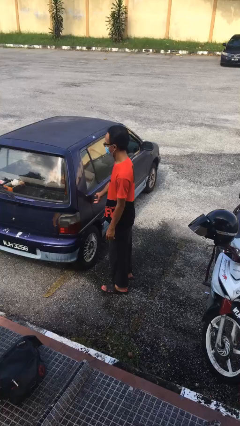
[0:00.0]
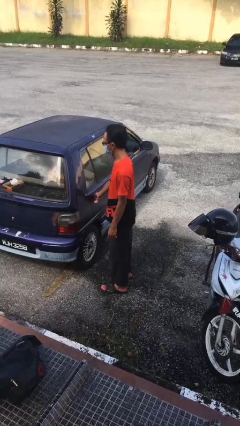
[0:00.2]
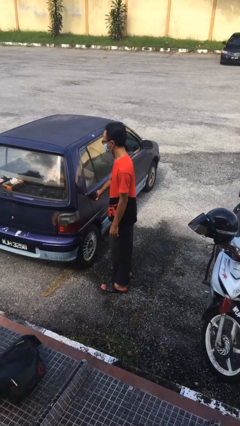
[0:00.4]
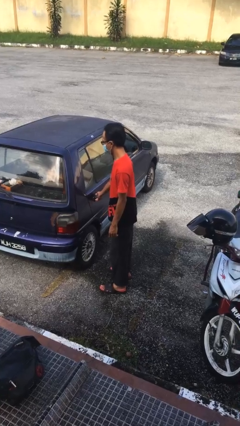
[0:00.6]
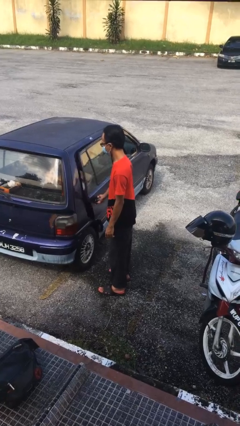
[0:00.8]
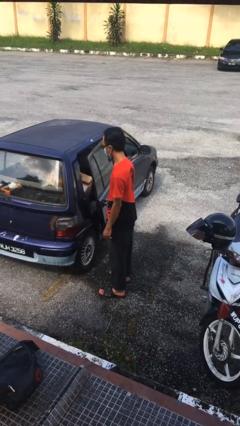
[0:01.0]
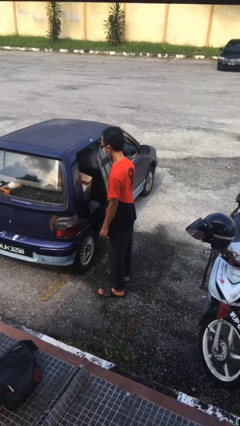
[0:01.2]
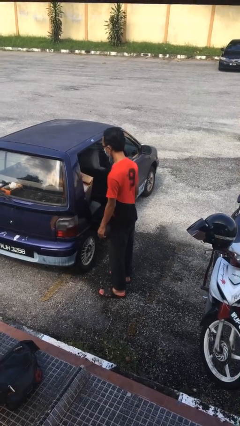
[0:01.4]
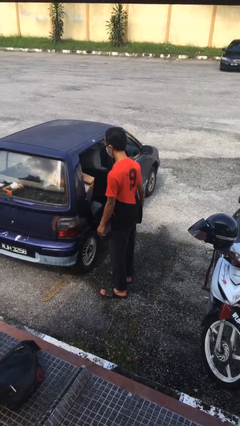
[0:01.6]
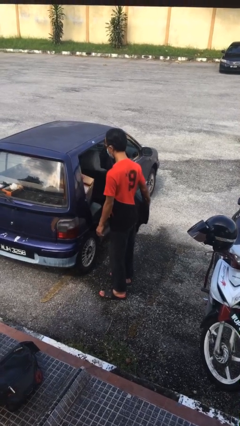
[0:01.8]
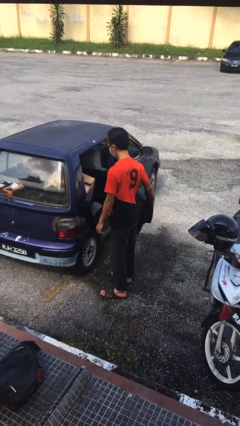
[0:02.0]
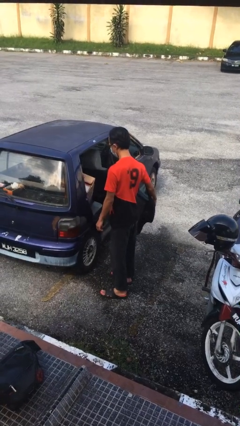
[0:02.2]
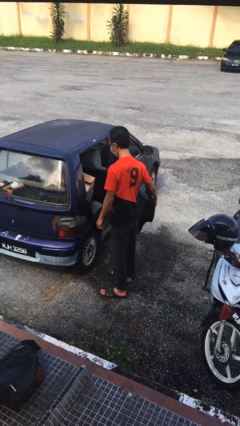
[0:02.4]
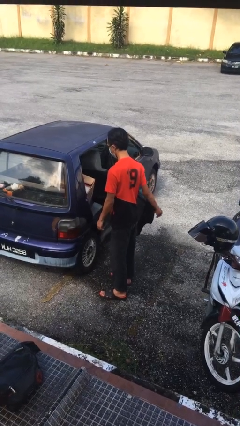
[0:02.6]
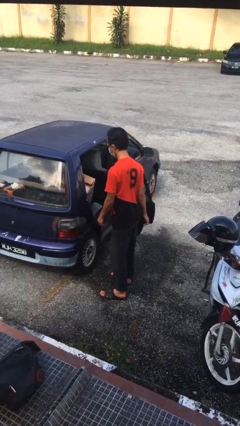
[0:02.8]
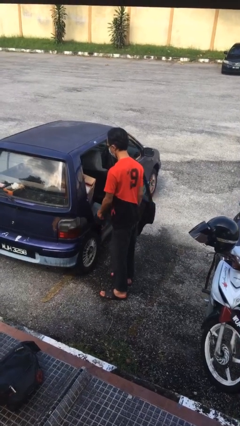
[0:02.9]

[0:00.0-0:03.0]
person opens car door

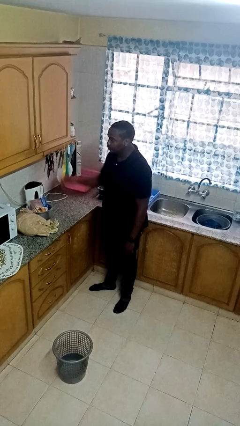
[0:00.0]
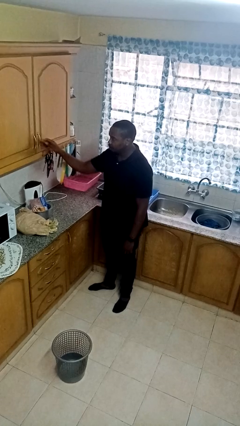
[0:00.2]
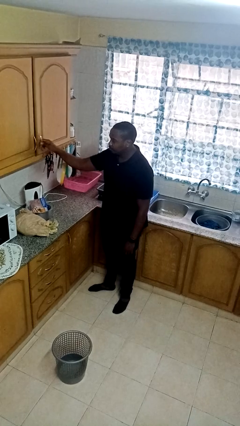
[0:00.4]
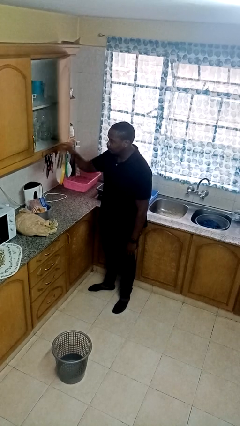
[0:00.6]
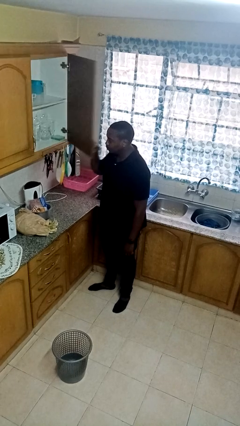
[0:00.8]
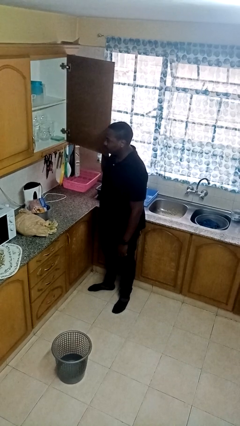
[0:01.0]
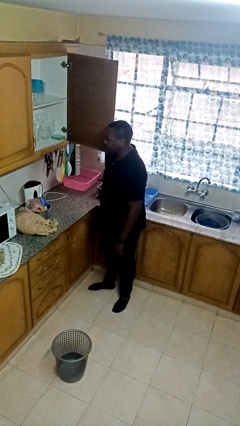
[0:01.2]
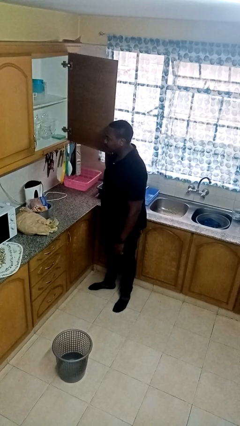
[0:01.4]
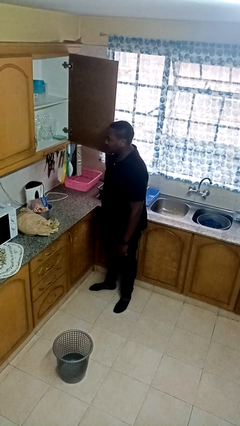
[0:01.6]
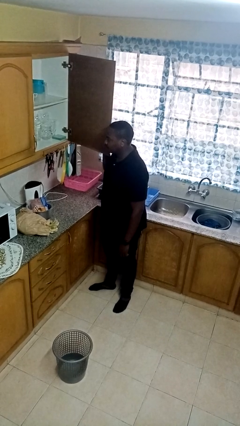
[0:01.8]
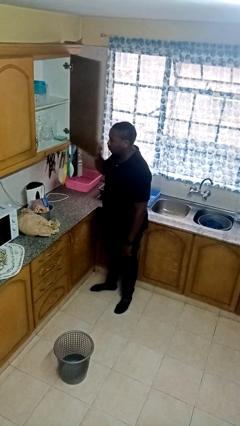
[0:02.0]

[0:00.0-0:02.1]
person opens cabinet

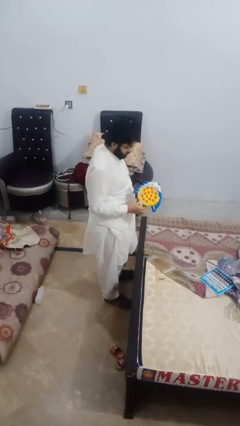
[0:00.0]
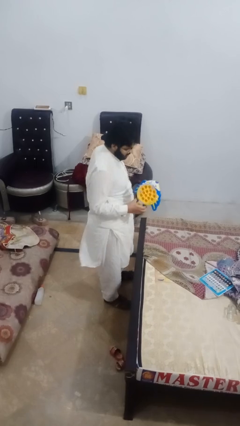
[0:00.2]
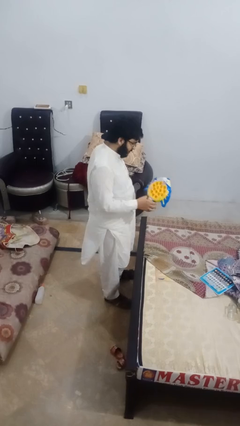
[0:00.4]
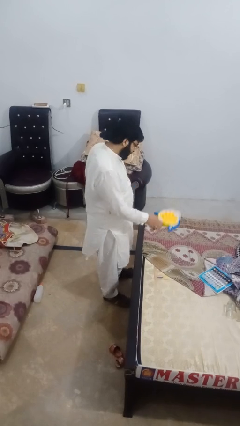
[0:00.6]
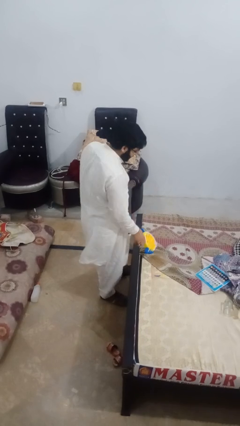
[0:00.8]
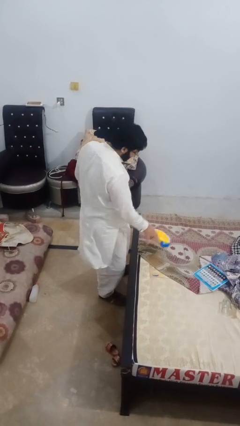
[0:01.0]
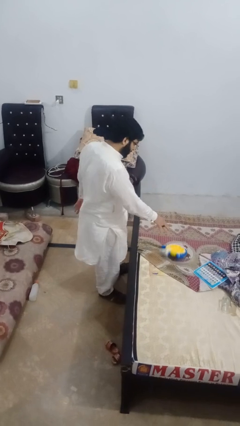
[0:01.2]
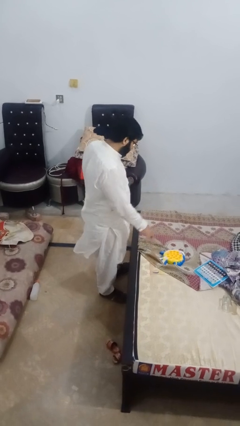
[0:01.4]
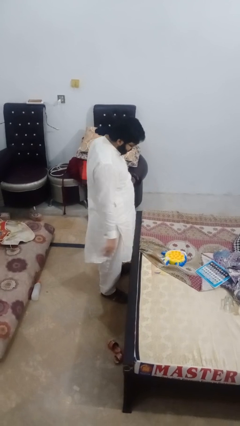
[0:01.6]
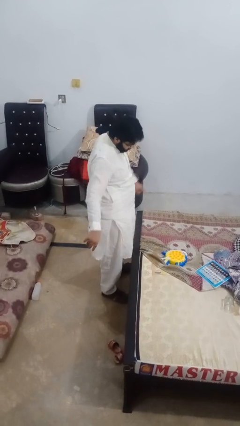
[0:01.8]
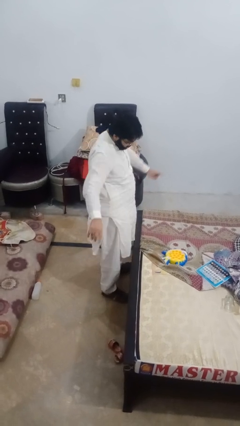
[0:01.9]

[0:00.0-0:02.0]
person puts down object on bed

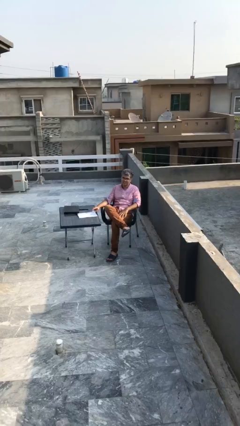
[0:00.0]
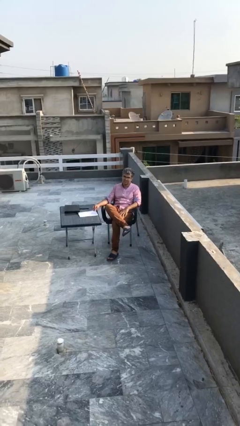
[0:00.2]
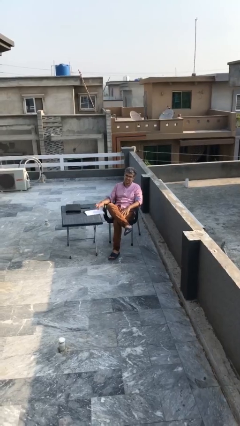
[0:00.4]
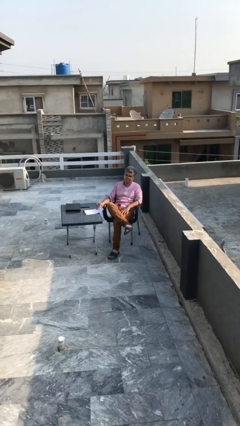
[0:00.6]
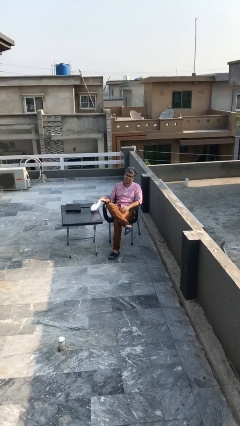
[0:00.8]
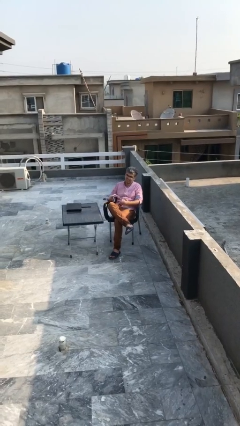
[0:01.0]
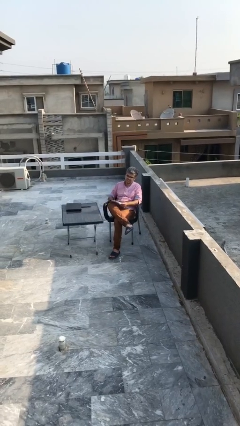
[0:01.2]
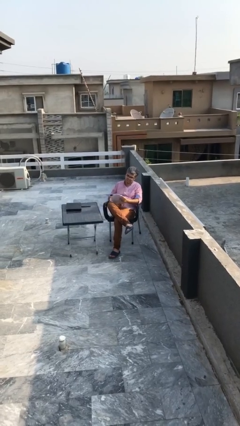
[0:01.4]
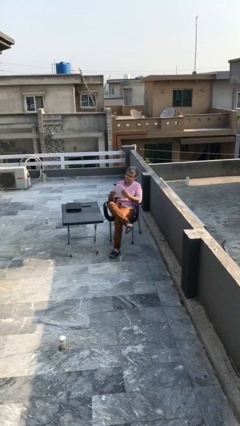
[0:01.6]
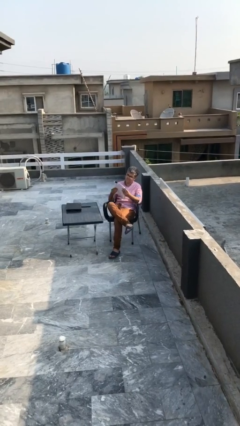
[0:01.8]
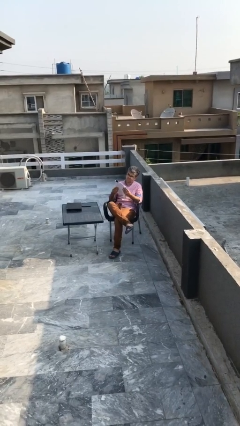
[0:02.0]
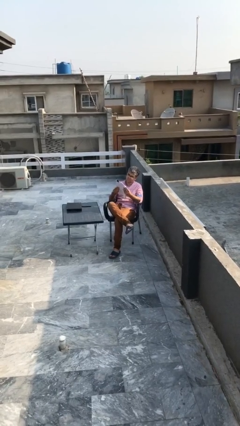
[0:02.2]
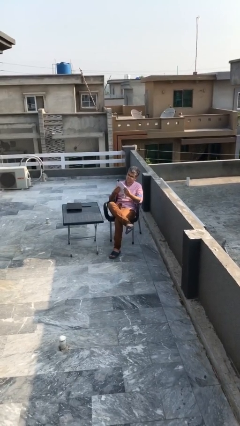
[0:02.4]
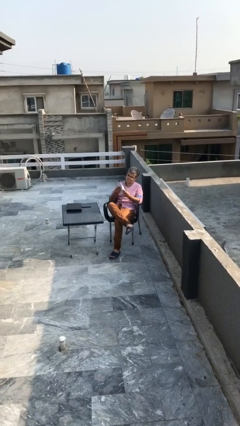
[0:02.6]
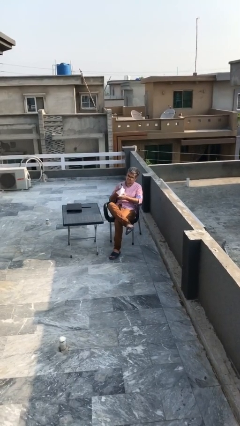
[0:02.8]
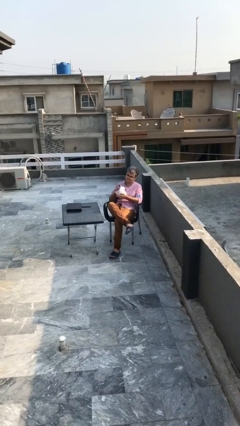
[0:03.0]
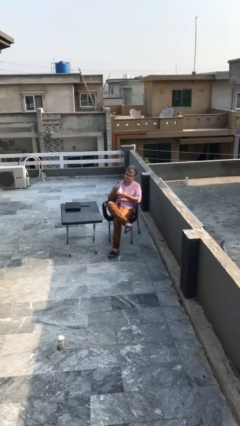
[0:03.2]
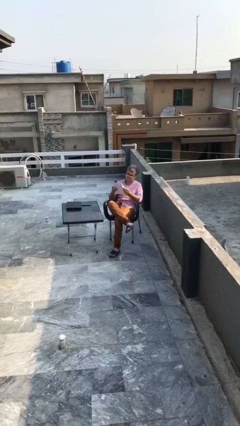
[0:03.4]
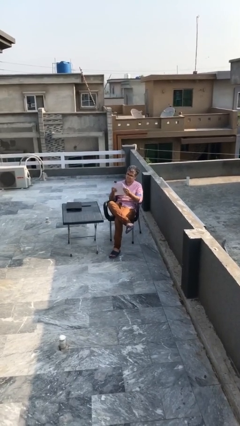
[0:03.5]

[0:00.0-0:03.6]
person reads document

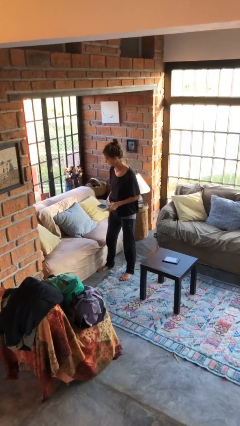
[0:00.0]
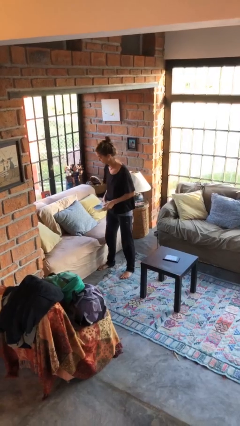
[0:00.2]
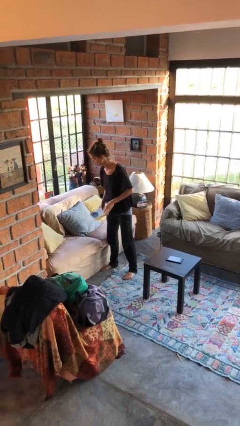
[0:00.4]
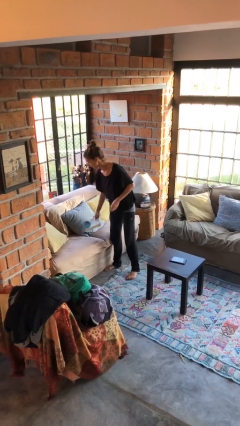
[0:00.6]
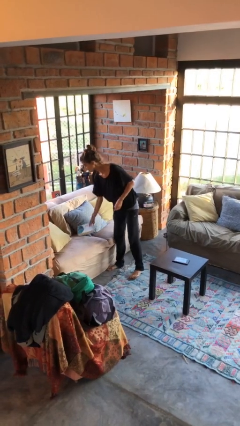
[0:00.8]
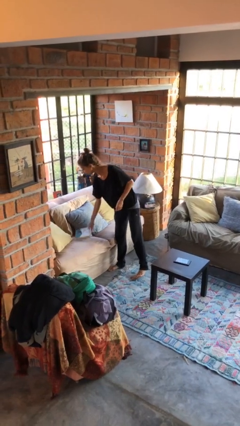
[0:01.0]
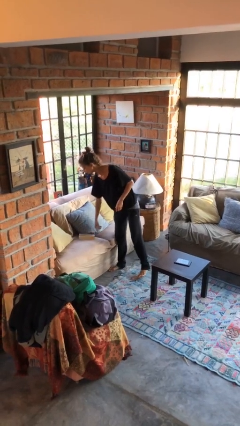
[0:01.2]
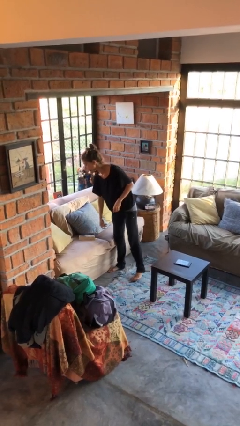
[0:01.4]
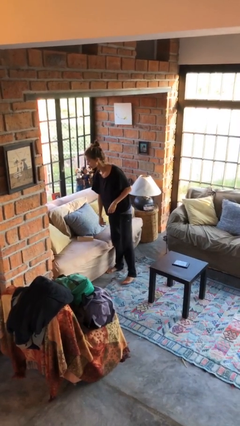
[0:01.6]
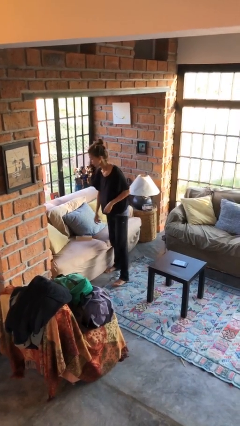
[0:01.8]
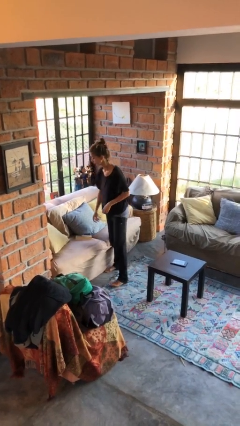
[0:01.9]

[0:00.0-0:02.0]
person puts down object on couch

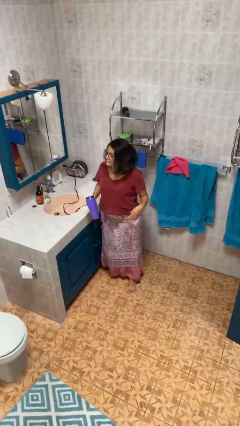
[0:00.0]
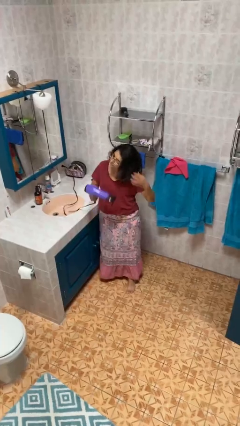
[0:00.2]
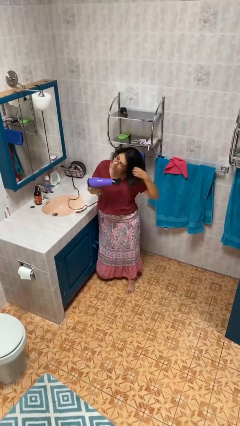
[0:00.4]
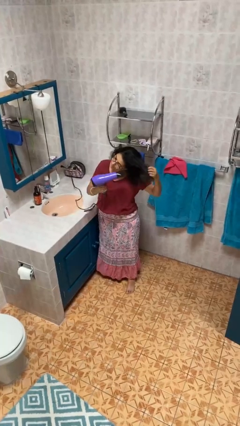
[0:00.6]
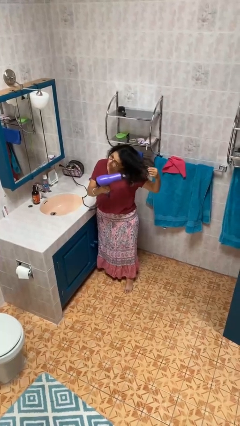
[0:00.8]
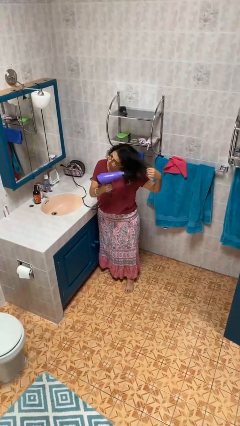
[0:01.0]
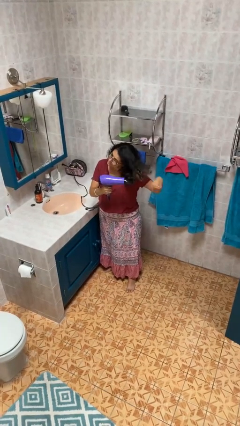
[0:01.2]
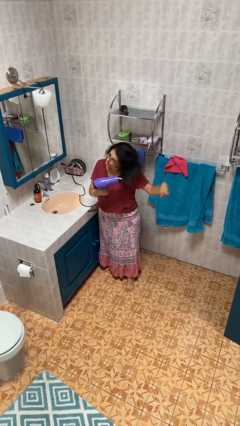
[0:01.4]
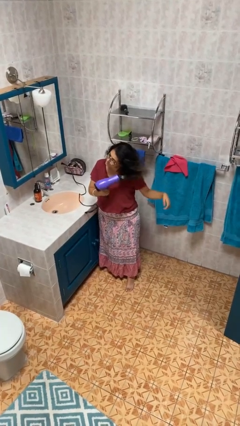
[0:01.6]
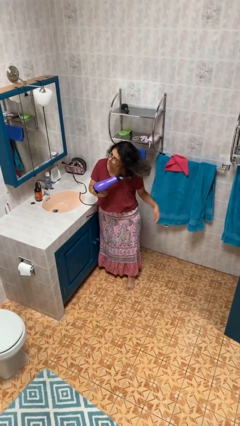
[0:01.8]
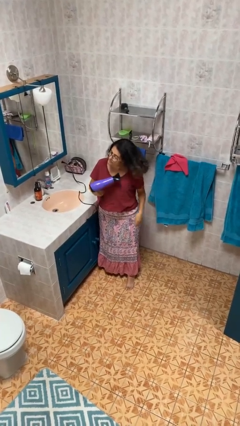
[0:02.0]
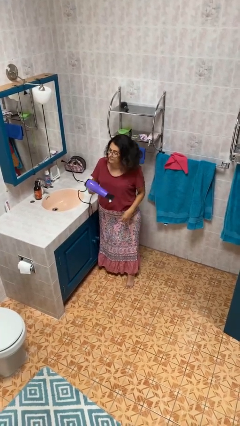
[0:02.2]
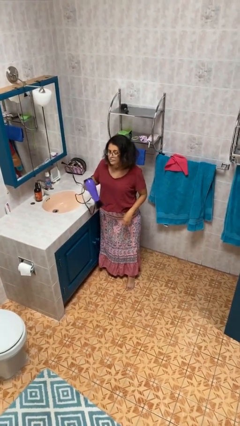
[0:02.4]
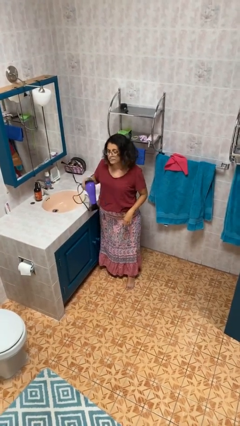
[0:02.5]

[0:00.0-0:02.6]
person dries hair with hairdryer

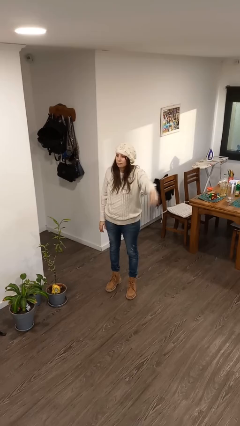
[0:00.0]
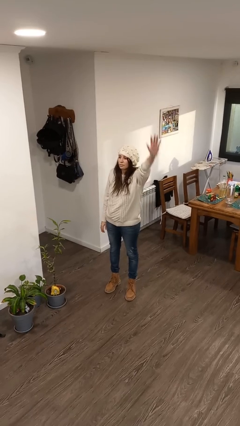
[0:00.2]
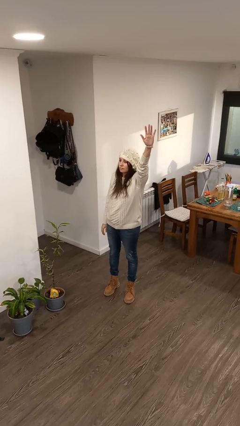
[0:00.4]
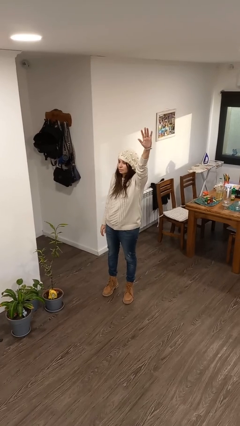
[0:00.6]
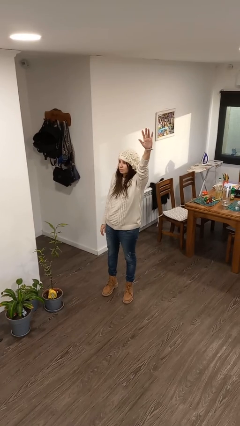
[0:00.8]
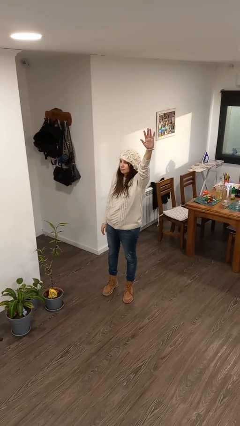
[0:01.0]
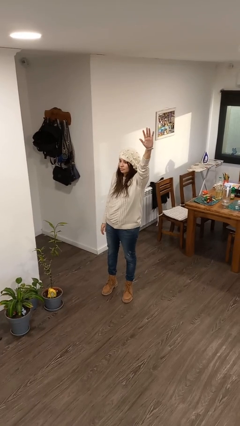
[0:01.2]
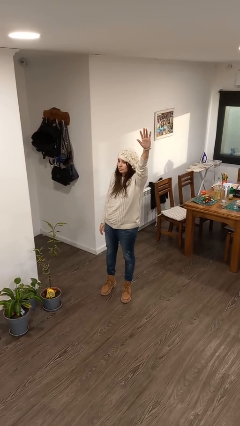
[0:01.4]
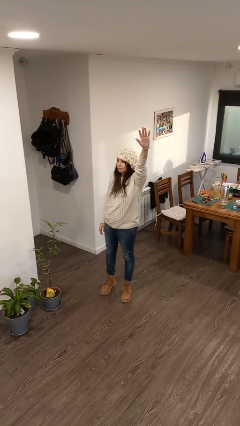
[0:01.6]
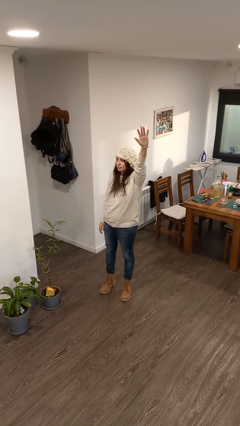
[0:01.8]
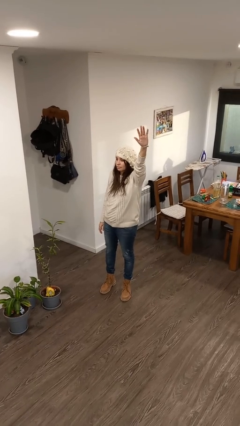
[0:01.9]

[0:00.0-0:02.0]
person gestures raise hand
